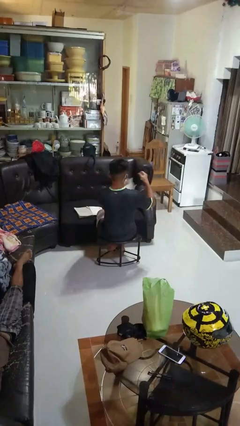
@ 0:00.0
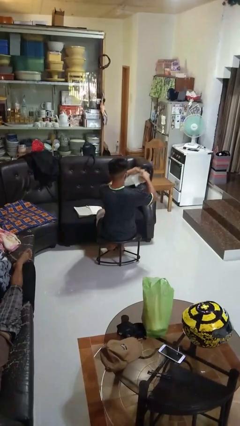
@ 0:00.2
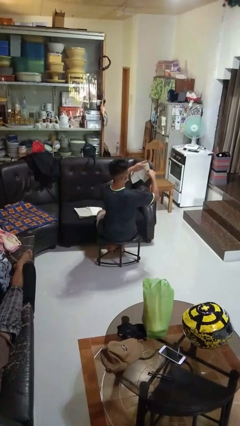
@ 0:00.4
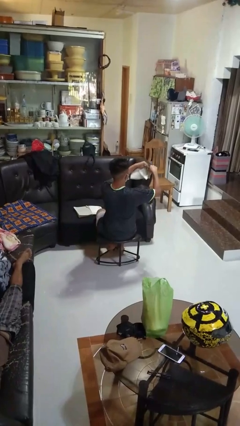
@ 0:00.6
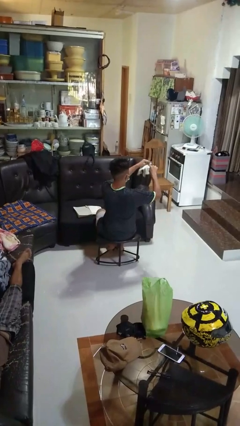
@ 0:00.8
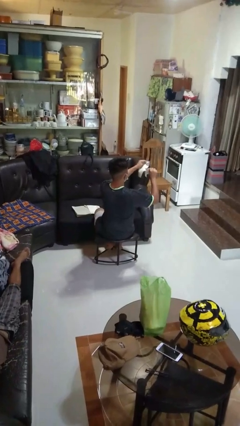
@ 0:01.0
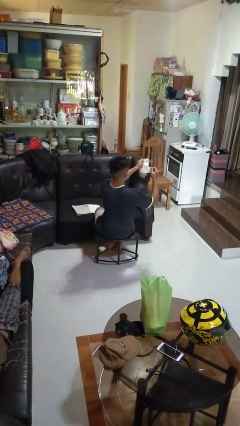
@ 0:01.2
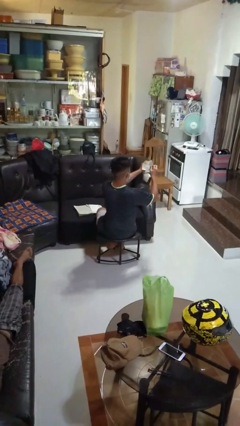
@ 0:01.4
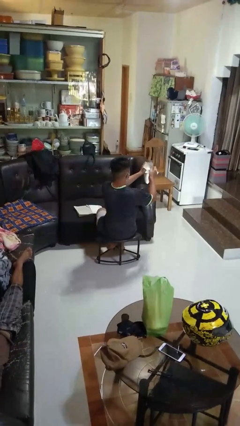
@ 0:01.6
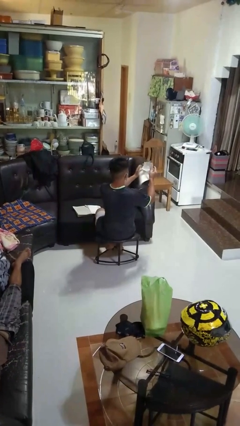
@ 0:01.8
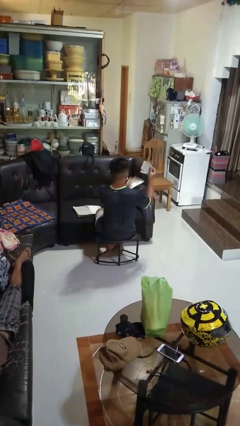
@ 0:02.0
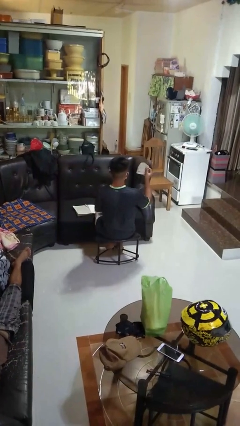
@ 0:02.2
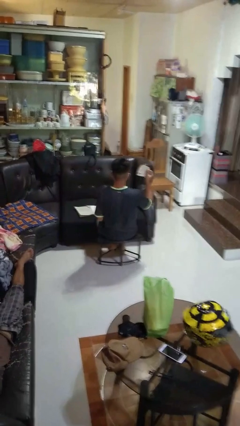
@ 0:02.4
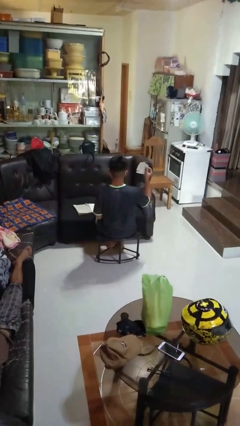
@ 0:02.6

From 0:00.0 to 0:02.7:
person tears paper

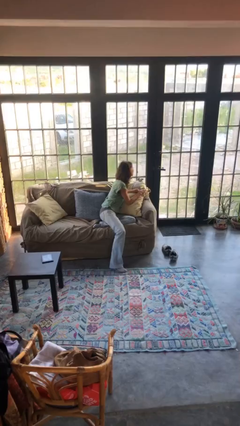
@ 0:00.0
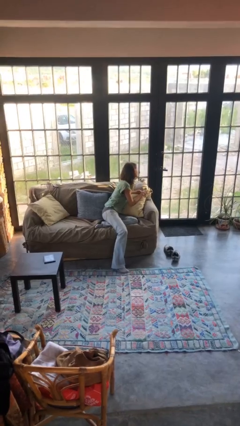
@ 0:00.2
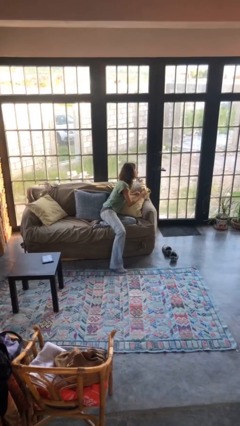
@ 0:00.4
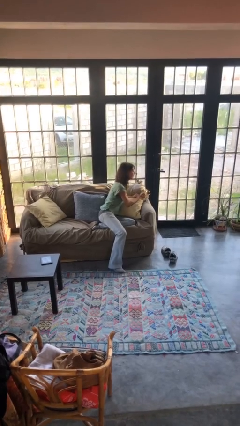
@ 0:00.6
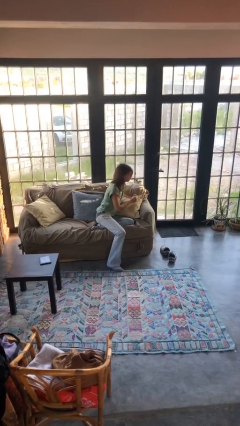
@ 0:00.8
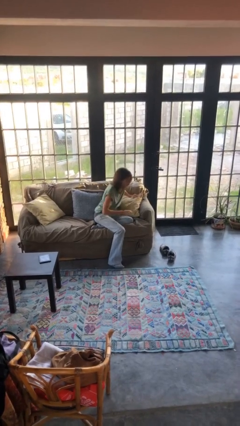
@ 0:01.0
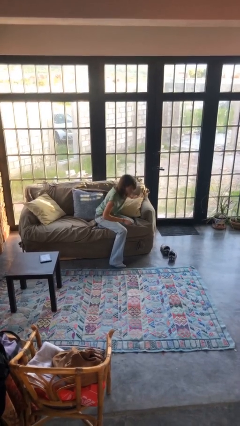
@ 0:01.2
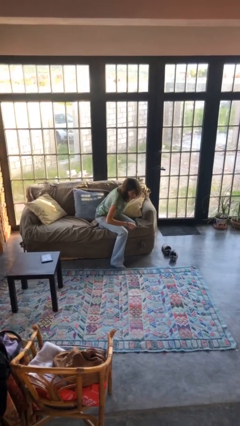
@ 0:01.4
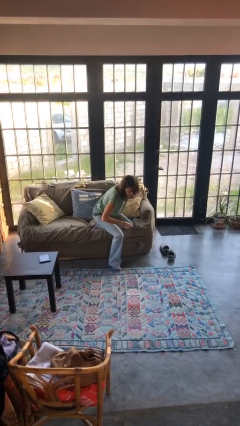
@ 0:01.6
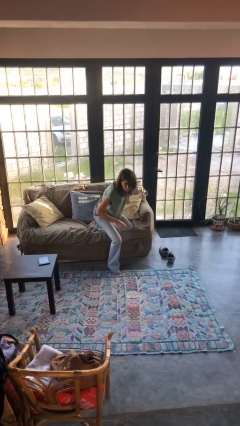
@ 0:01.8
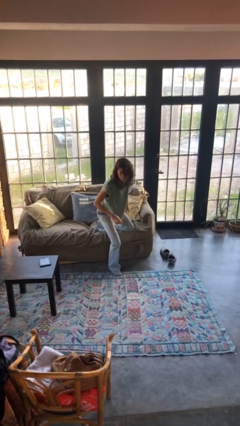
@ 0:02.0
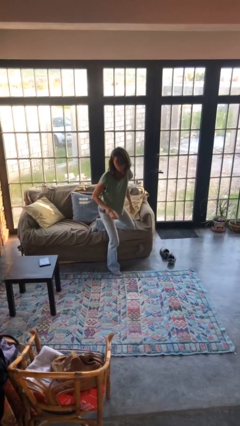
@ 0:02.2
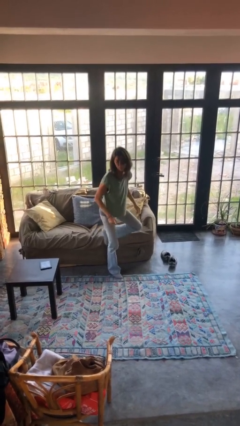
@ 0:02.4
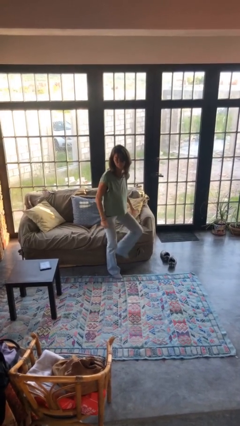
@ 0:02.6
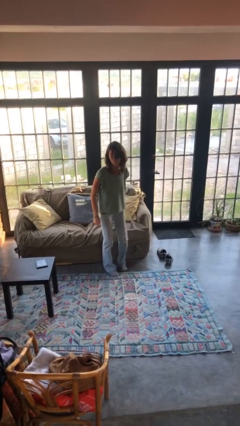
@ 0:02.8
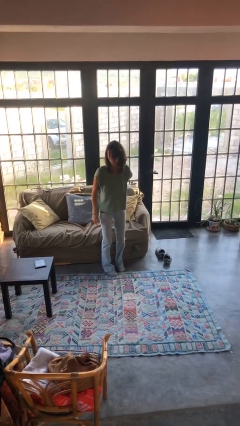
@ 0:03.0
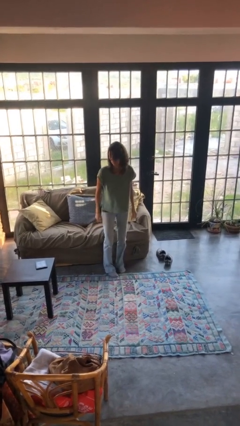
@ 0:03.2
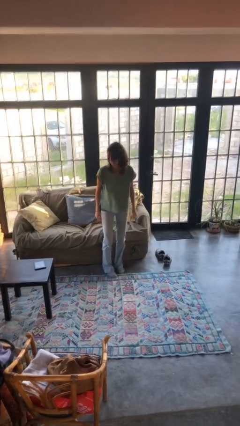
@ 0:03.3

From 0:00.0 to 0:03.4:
person stands up

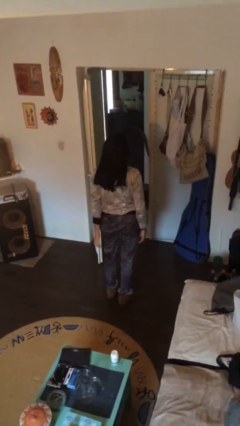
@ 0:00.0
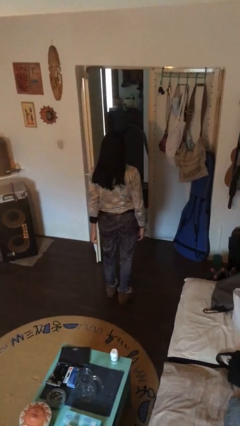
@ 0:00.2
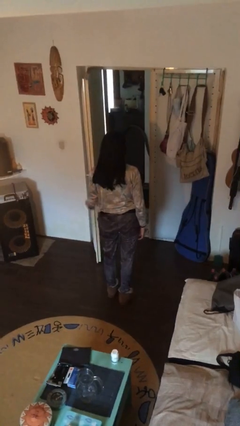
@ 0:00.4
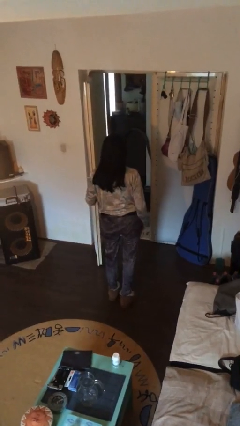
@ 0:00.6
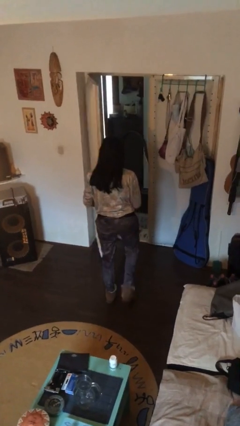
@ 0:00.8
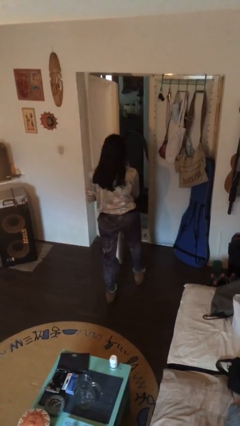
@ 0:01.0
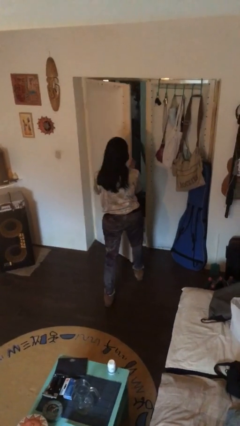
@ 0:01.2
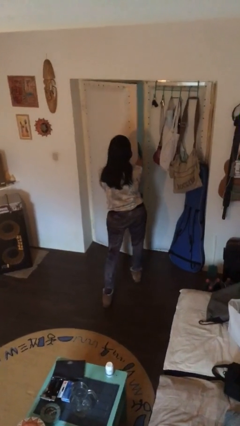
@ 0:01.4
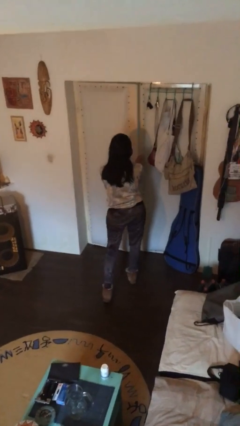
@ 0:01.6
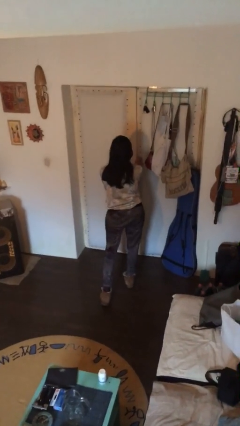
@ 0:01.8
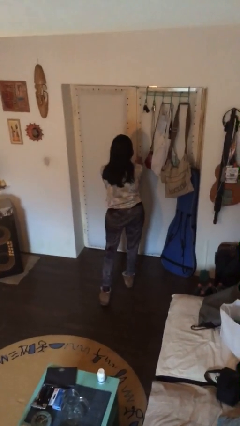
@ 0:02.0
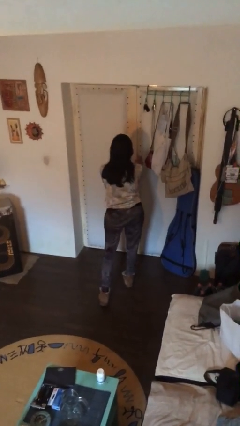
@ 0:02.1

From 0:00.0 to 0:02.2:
person closes facility door

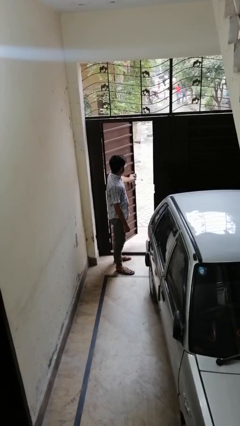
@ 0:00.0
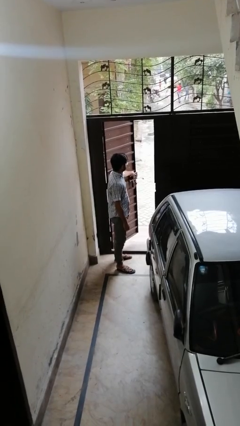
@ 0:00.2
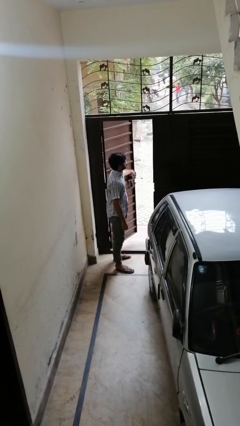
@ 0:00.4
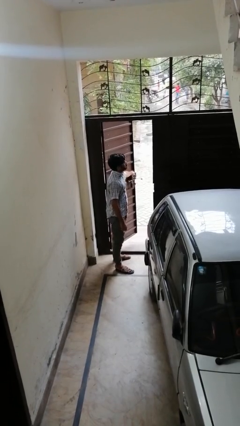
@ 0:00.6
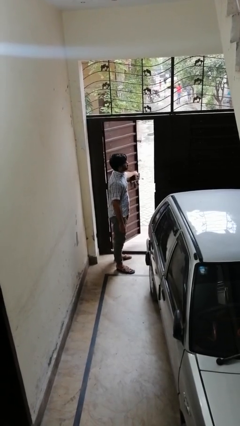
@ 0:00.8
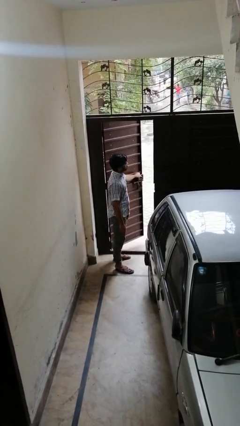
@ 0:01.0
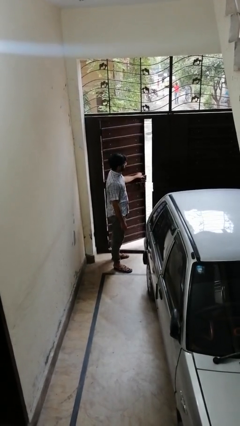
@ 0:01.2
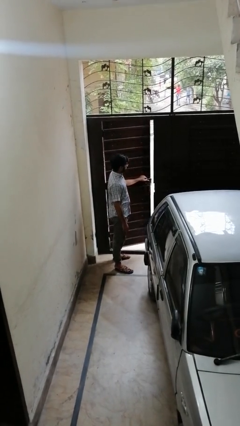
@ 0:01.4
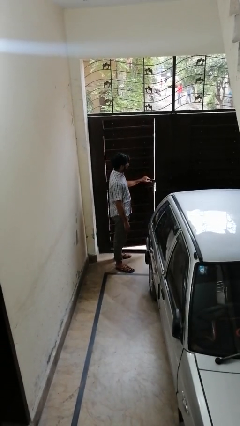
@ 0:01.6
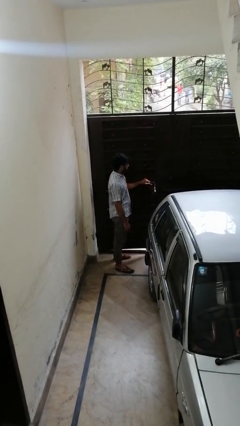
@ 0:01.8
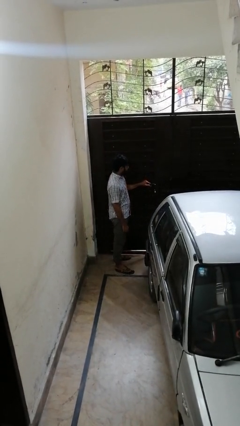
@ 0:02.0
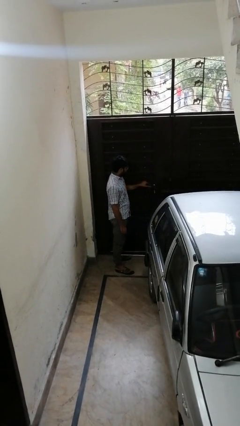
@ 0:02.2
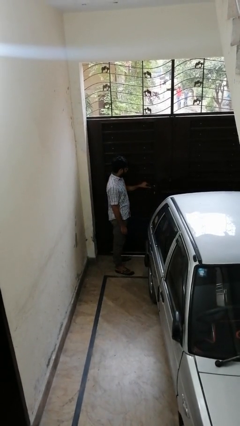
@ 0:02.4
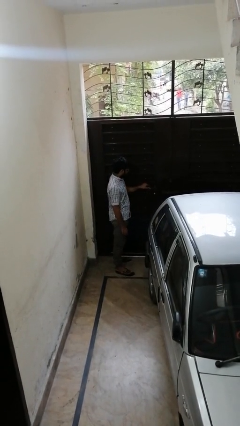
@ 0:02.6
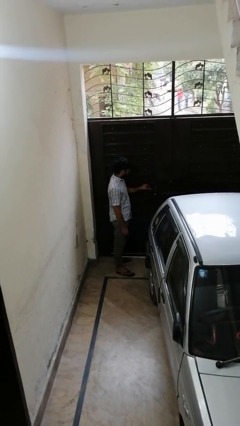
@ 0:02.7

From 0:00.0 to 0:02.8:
person closes gate

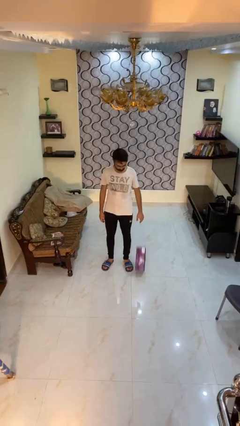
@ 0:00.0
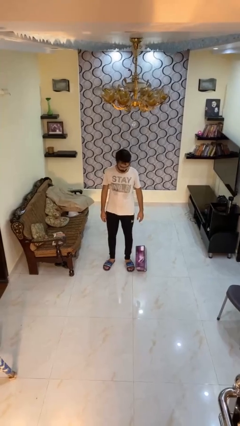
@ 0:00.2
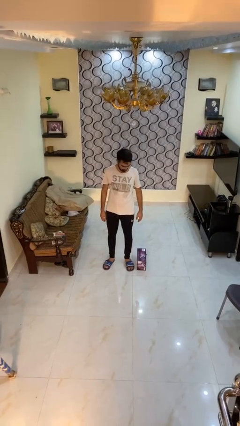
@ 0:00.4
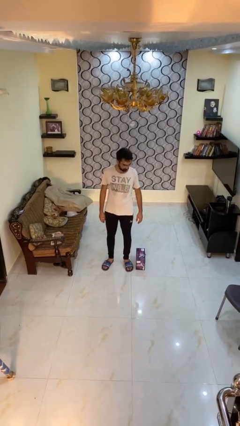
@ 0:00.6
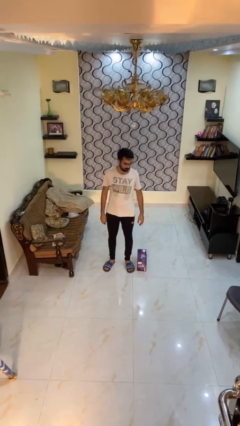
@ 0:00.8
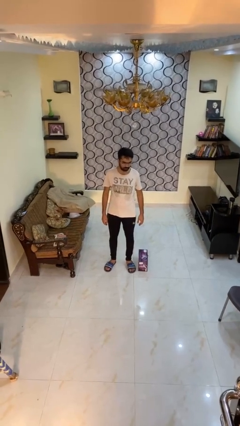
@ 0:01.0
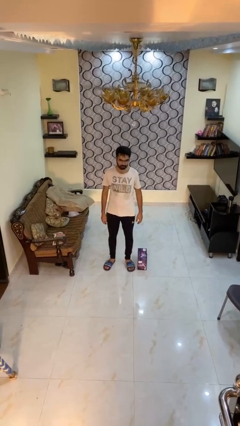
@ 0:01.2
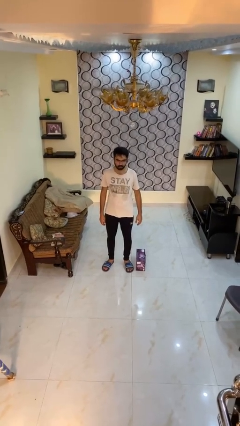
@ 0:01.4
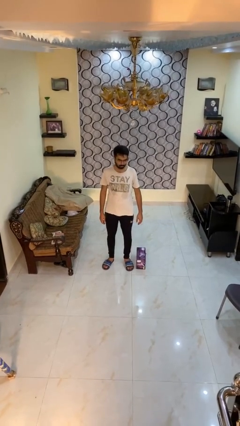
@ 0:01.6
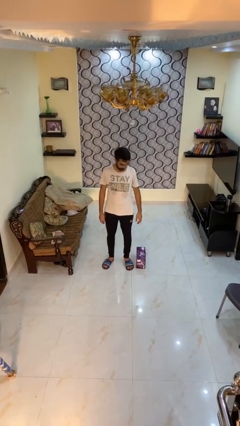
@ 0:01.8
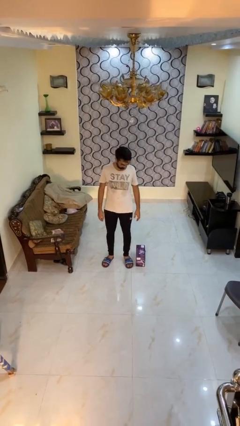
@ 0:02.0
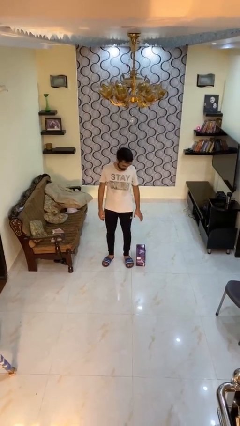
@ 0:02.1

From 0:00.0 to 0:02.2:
person drops object

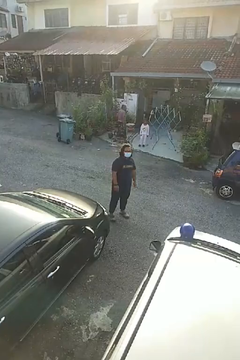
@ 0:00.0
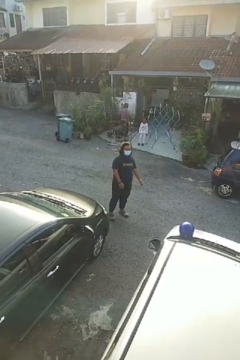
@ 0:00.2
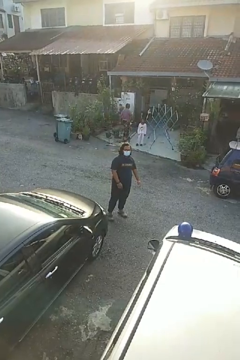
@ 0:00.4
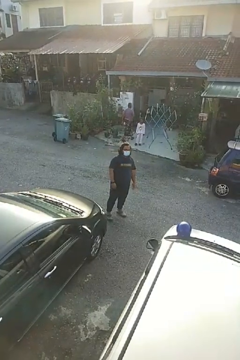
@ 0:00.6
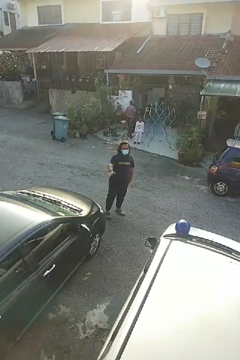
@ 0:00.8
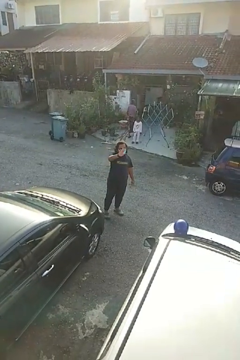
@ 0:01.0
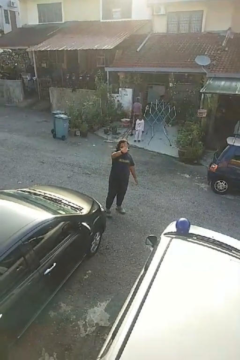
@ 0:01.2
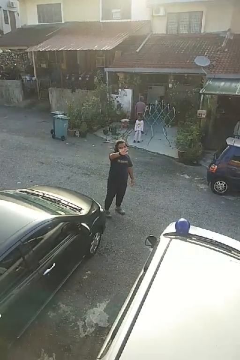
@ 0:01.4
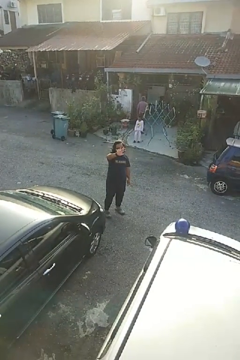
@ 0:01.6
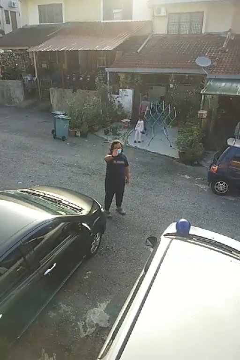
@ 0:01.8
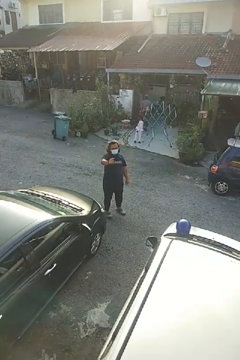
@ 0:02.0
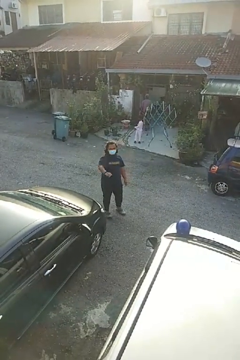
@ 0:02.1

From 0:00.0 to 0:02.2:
person waves at person

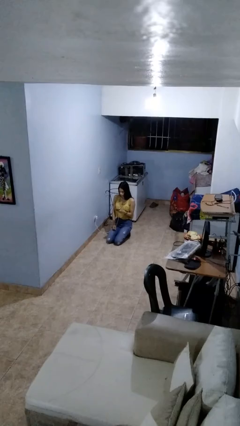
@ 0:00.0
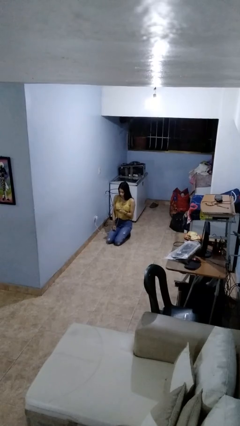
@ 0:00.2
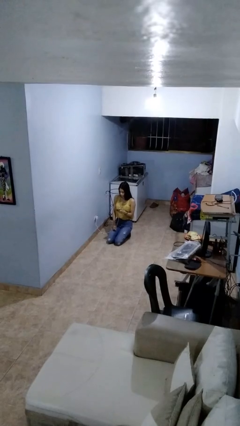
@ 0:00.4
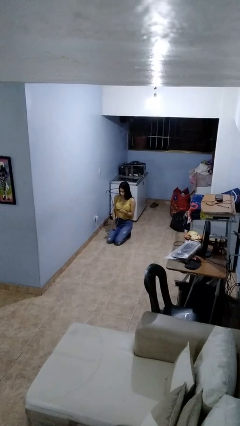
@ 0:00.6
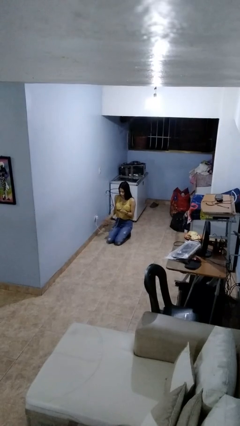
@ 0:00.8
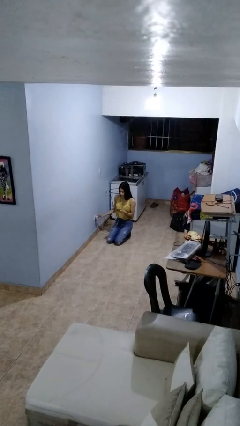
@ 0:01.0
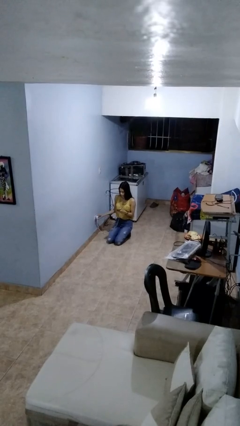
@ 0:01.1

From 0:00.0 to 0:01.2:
person unplugs from electrical socket

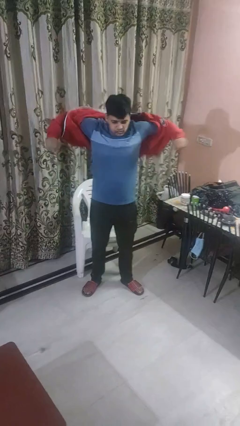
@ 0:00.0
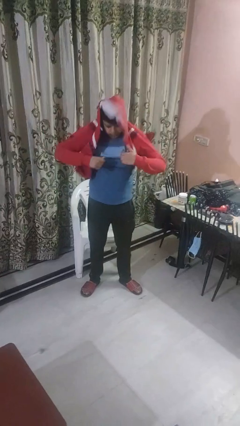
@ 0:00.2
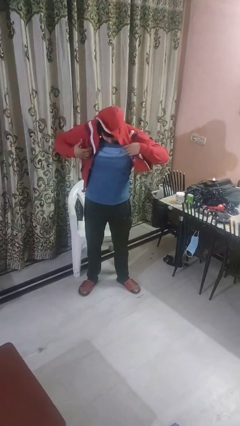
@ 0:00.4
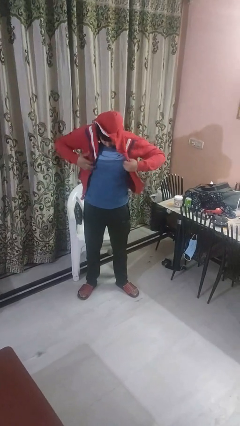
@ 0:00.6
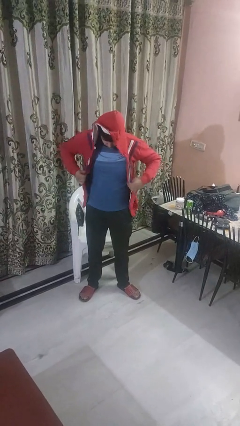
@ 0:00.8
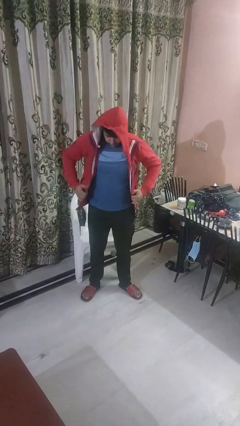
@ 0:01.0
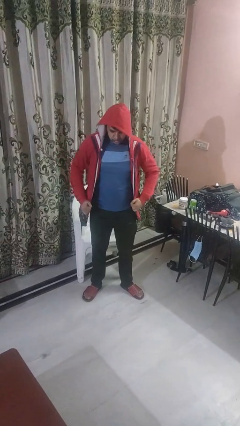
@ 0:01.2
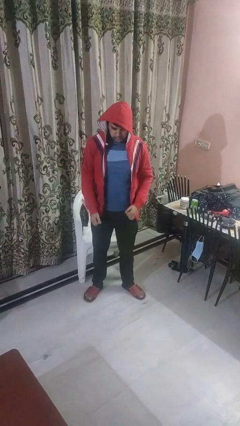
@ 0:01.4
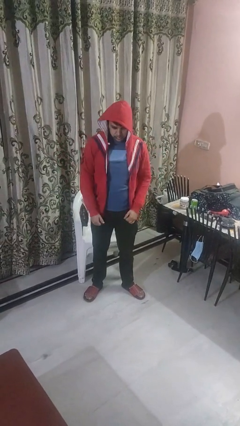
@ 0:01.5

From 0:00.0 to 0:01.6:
person puts on hoodie
